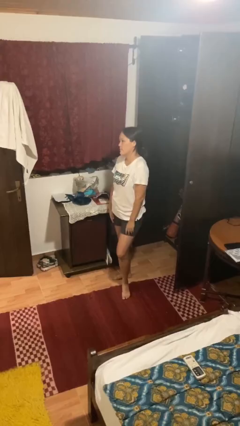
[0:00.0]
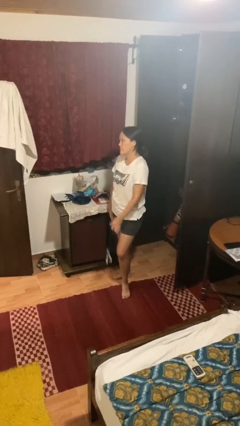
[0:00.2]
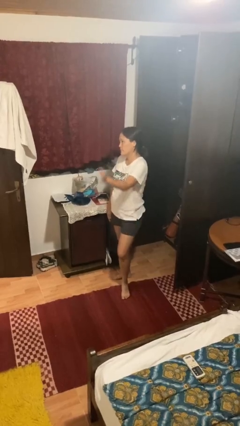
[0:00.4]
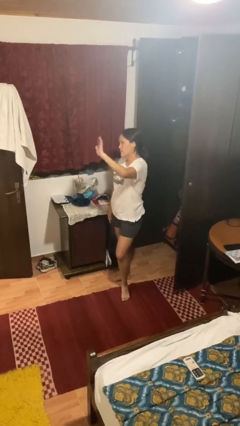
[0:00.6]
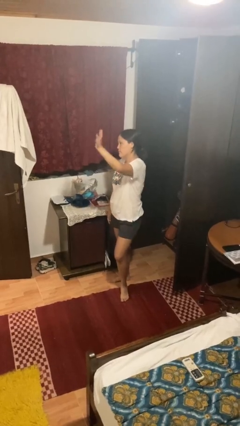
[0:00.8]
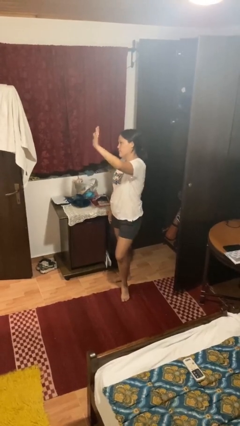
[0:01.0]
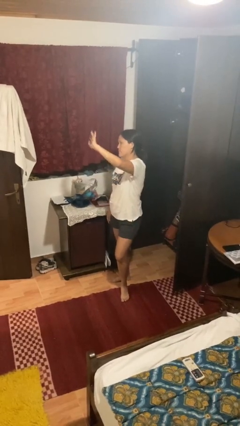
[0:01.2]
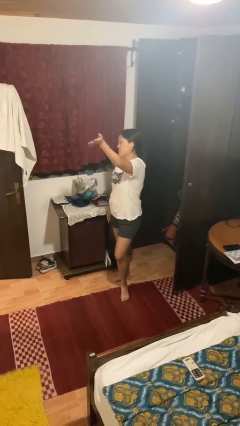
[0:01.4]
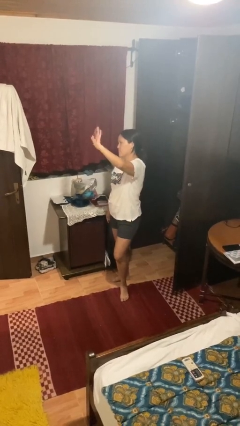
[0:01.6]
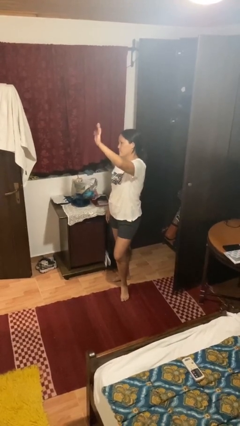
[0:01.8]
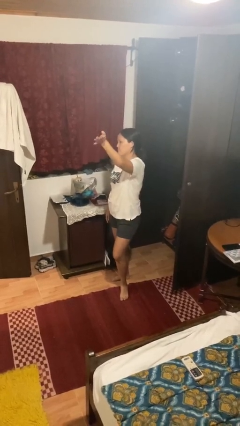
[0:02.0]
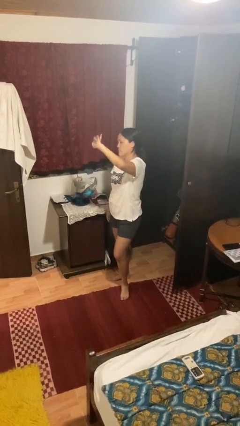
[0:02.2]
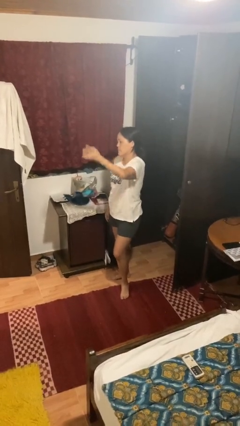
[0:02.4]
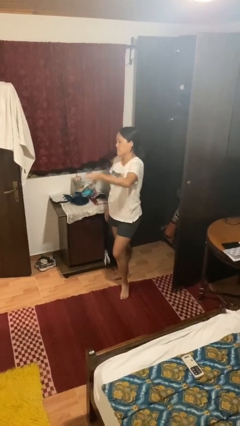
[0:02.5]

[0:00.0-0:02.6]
person waves at person

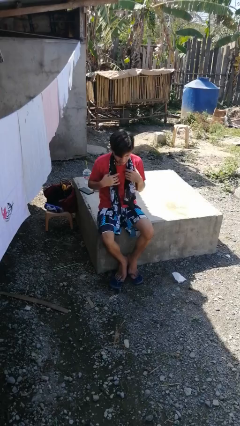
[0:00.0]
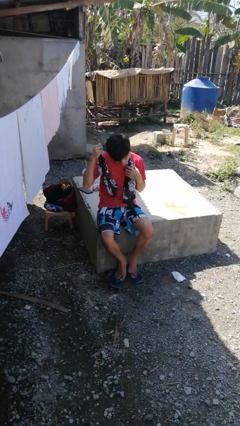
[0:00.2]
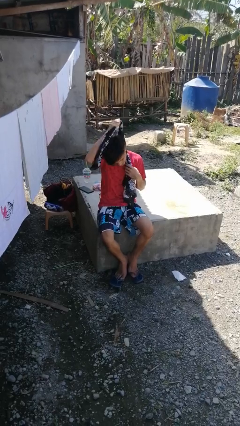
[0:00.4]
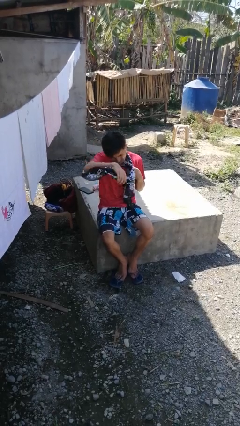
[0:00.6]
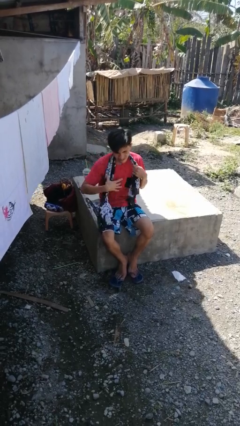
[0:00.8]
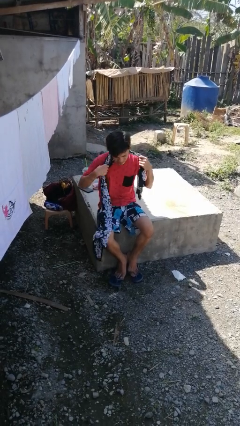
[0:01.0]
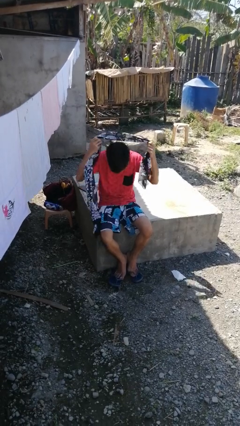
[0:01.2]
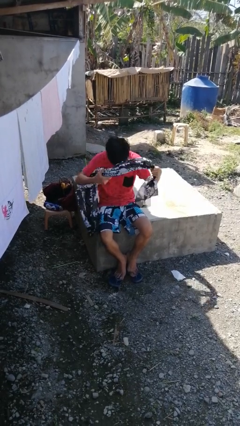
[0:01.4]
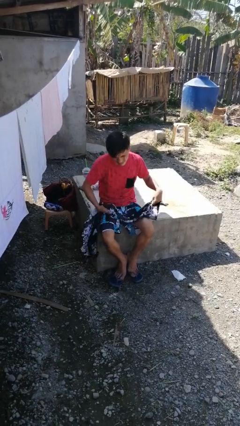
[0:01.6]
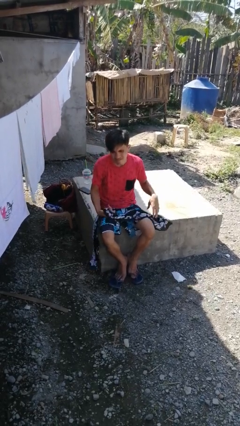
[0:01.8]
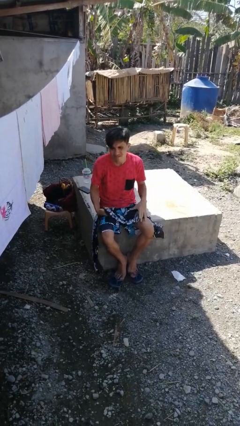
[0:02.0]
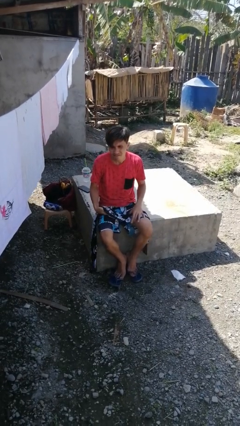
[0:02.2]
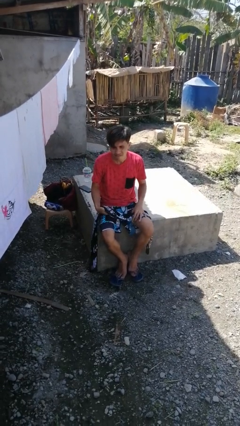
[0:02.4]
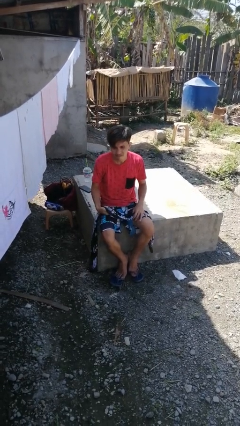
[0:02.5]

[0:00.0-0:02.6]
person takes off scarf

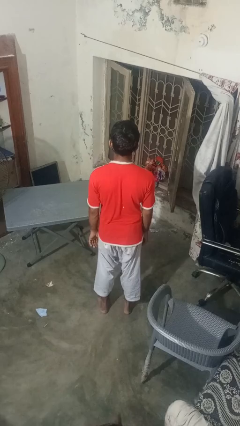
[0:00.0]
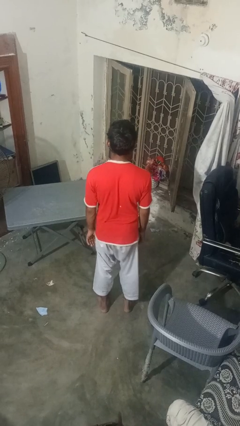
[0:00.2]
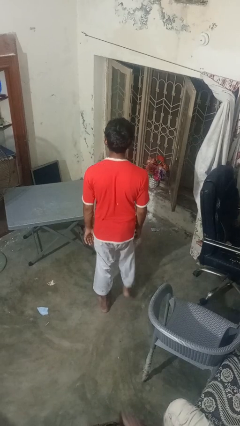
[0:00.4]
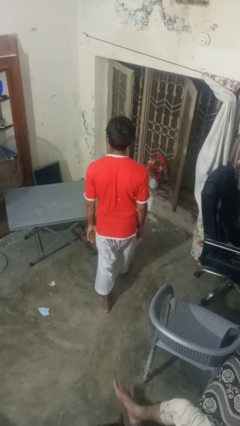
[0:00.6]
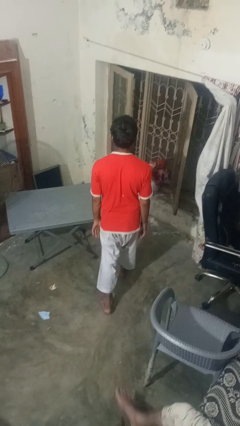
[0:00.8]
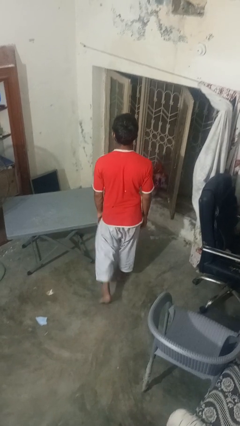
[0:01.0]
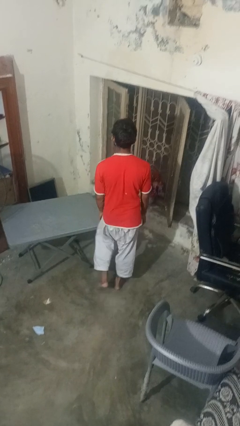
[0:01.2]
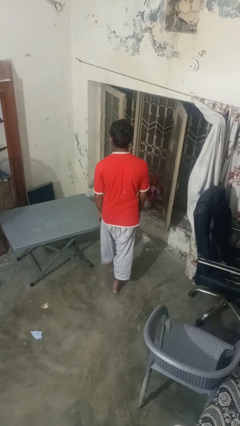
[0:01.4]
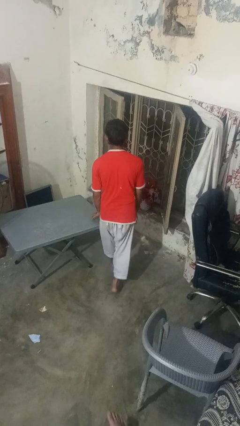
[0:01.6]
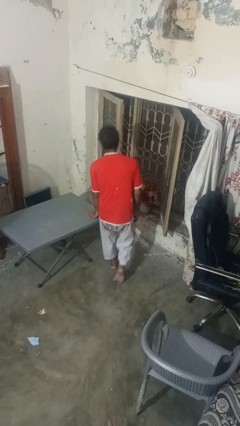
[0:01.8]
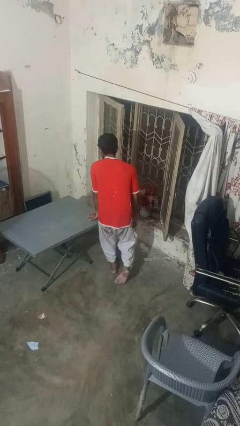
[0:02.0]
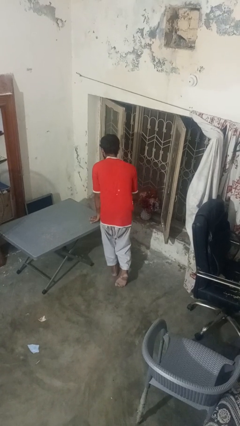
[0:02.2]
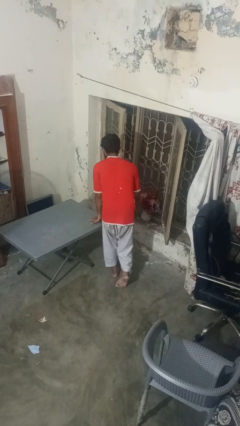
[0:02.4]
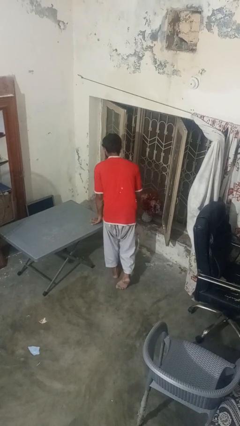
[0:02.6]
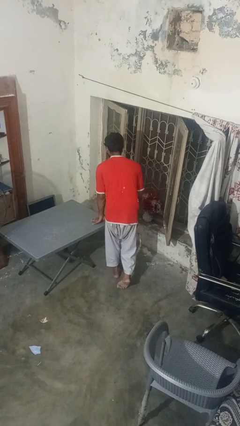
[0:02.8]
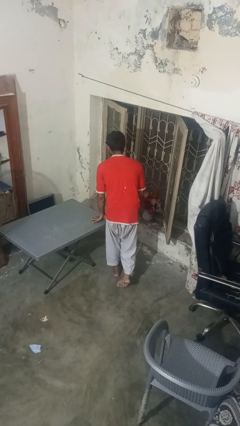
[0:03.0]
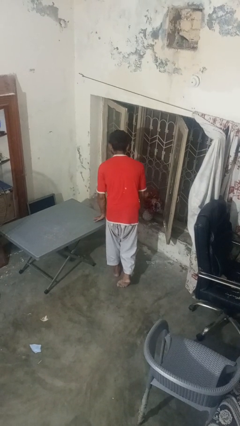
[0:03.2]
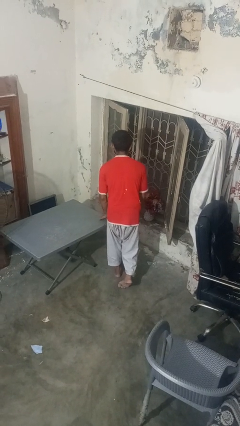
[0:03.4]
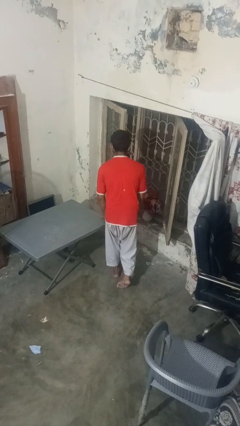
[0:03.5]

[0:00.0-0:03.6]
person bumps into table

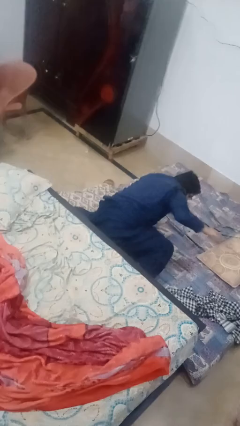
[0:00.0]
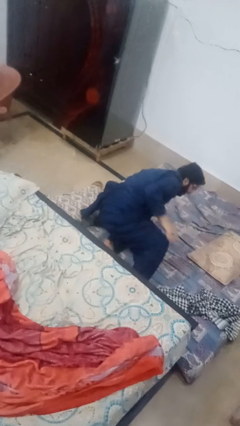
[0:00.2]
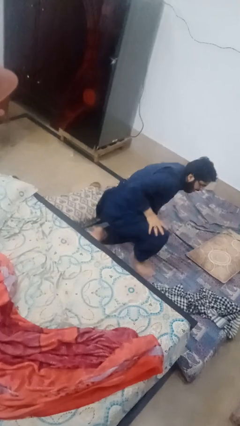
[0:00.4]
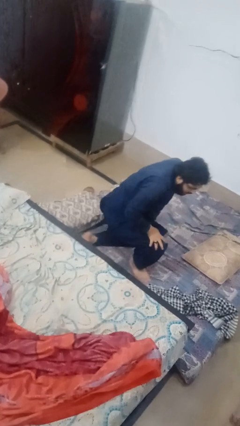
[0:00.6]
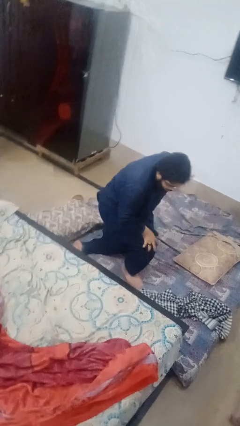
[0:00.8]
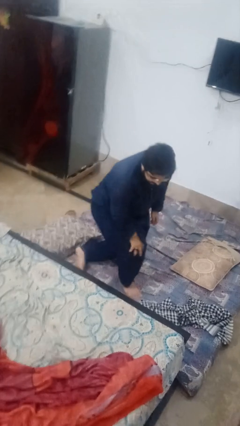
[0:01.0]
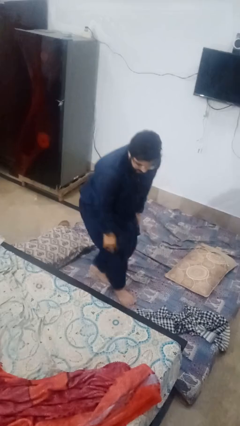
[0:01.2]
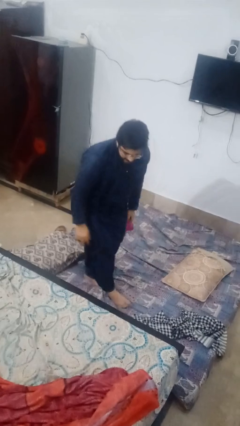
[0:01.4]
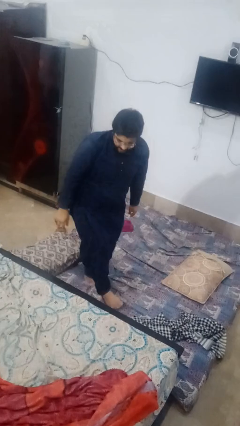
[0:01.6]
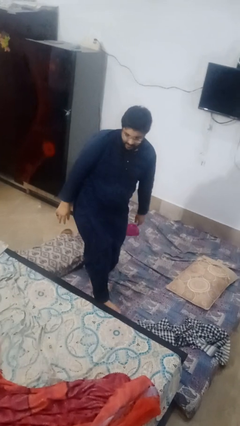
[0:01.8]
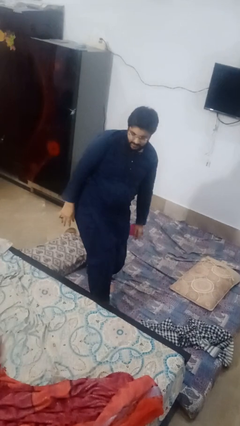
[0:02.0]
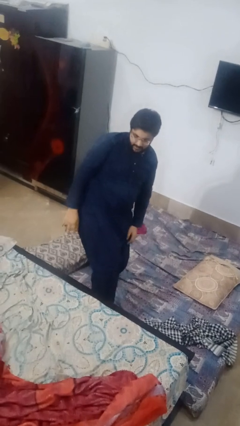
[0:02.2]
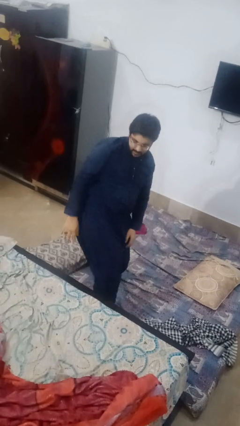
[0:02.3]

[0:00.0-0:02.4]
person stands up from floor

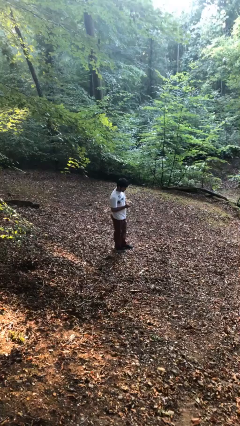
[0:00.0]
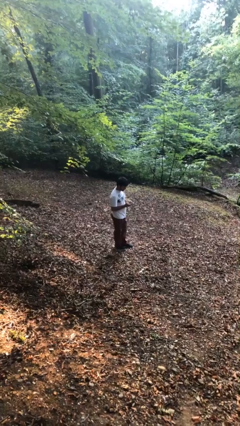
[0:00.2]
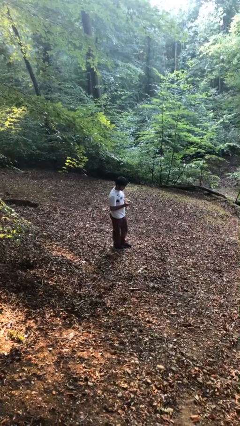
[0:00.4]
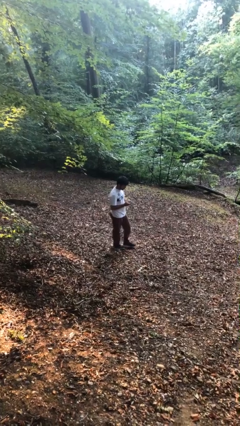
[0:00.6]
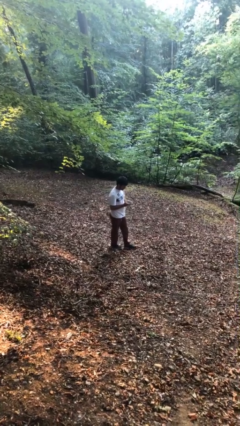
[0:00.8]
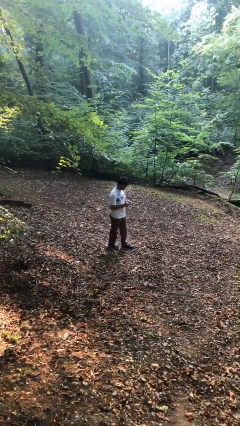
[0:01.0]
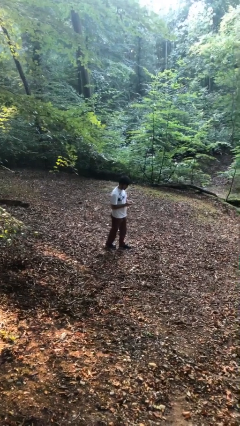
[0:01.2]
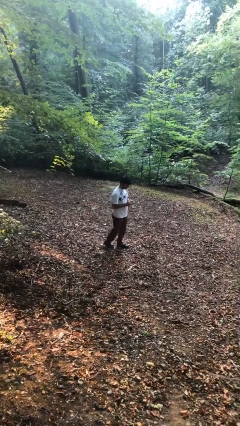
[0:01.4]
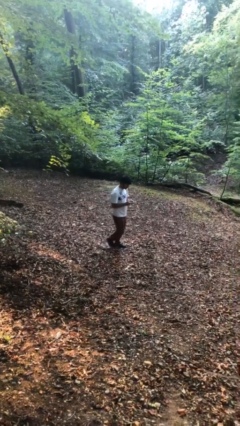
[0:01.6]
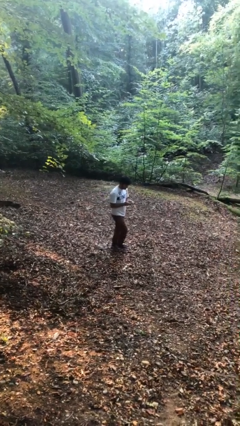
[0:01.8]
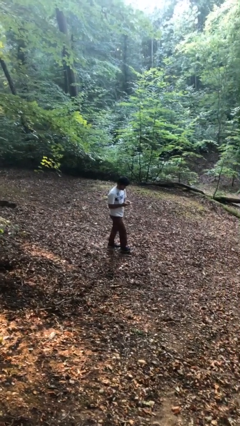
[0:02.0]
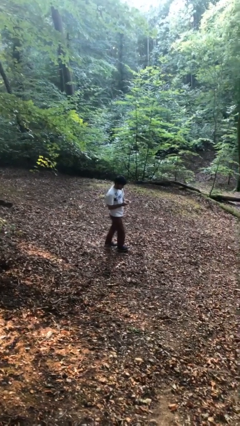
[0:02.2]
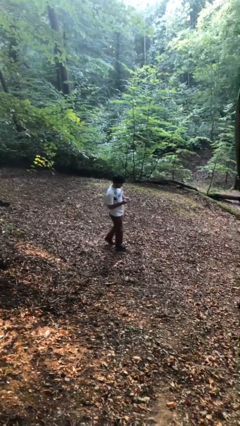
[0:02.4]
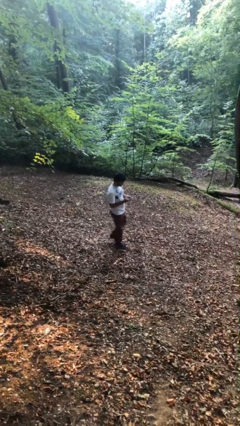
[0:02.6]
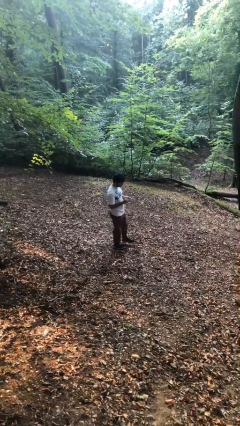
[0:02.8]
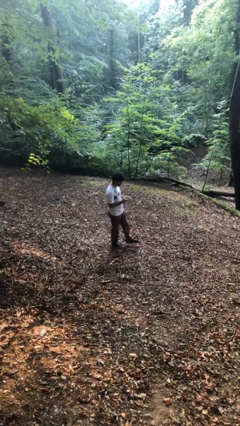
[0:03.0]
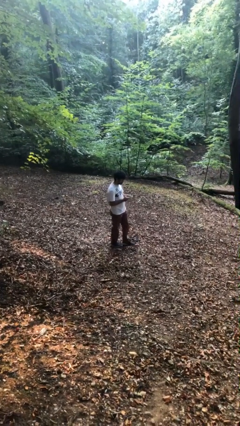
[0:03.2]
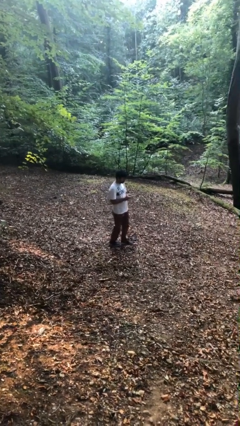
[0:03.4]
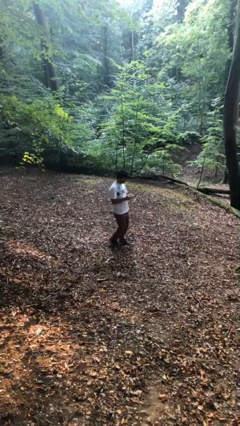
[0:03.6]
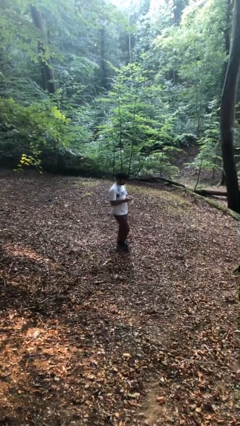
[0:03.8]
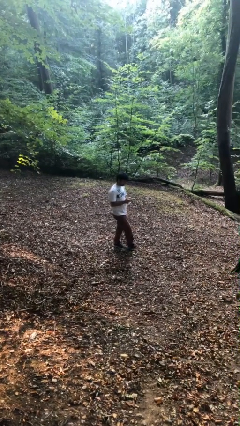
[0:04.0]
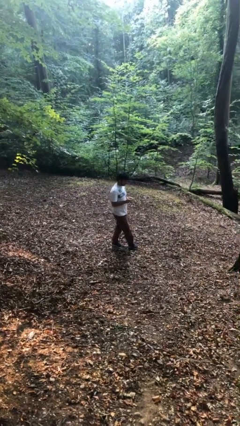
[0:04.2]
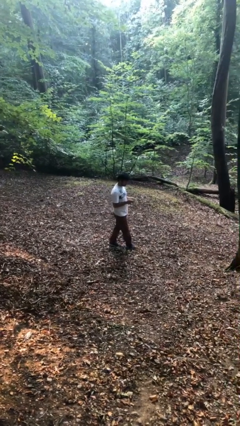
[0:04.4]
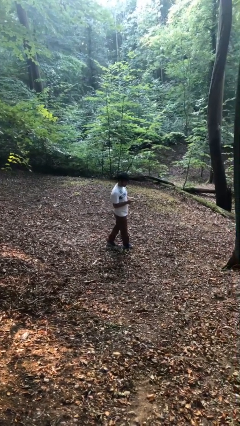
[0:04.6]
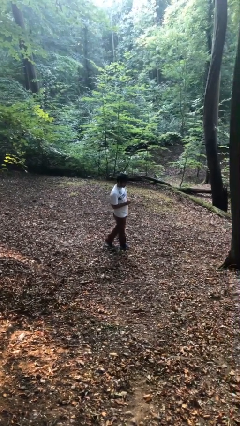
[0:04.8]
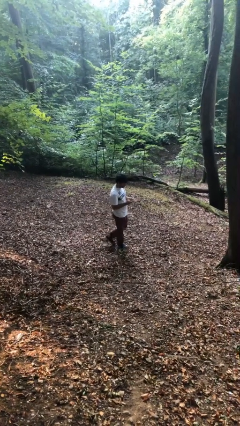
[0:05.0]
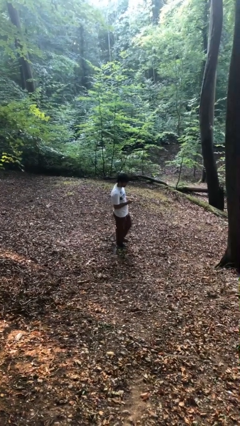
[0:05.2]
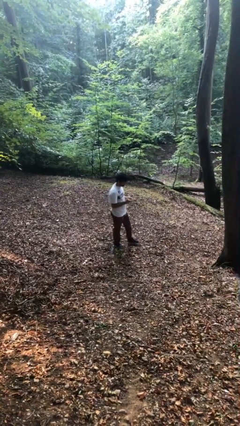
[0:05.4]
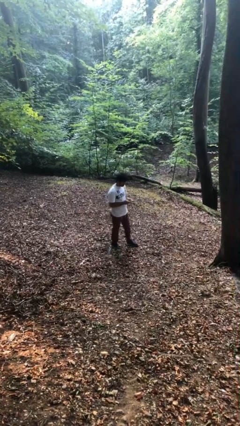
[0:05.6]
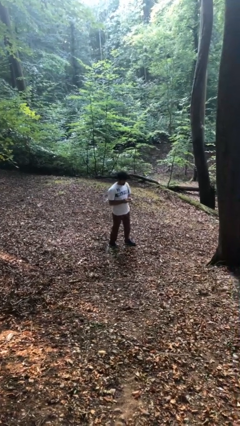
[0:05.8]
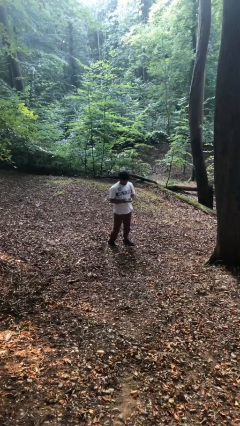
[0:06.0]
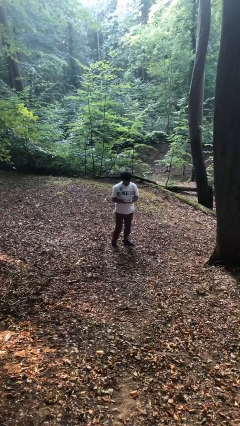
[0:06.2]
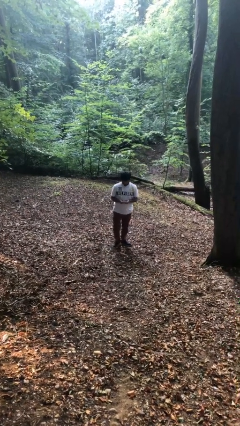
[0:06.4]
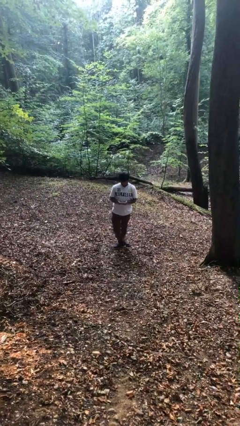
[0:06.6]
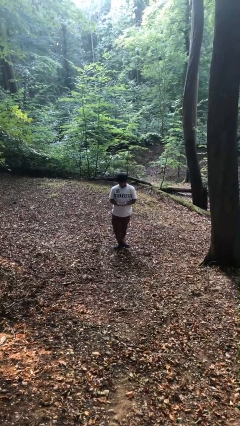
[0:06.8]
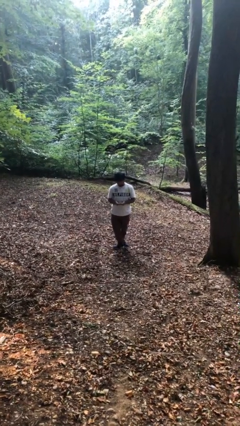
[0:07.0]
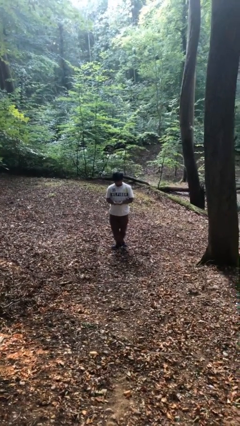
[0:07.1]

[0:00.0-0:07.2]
person texts on phone
